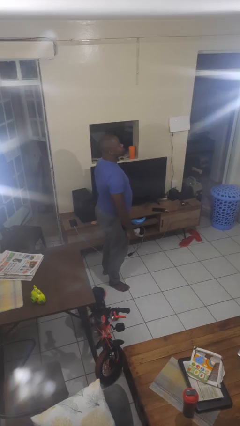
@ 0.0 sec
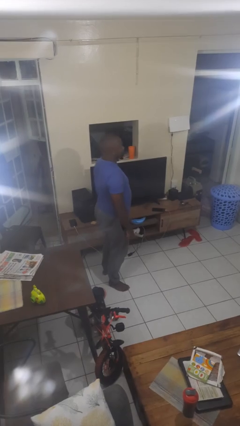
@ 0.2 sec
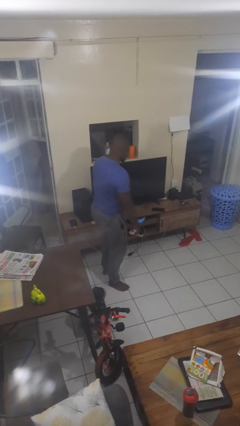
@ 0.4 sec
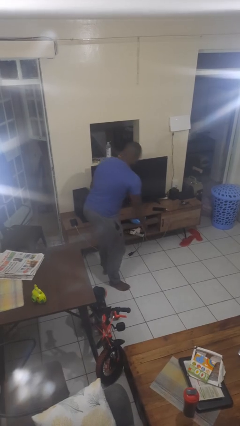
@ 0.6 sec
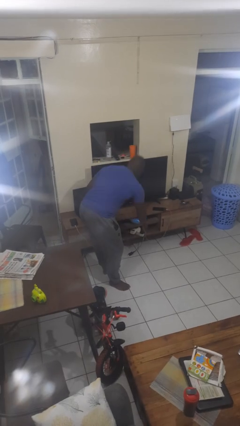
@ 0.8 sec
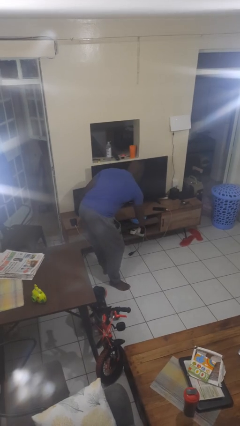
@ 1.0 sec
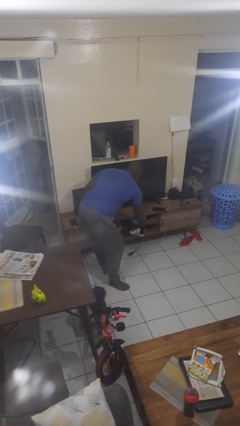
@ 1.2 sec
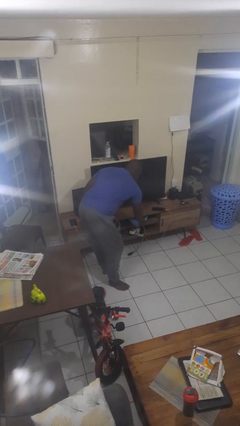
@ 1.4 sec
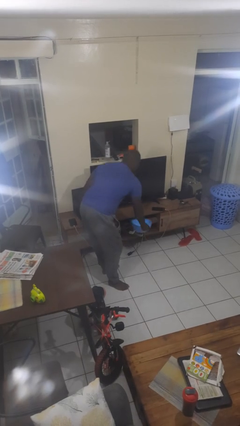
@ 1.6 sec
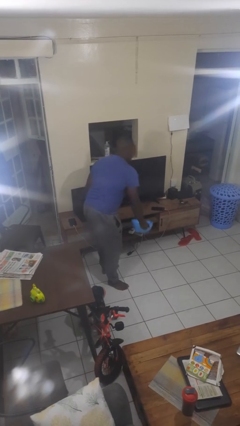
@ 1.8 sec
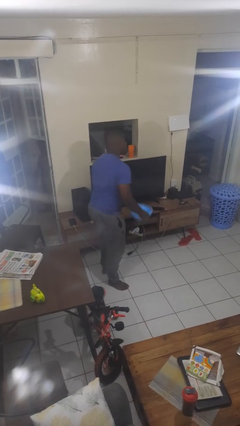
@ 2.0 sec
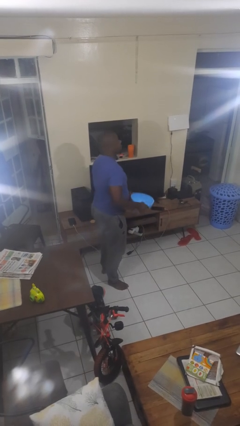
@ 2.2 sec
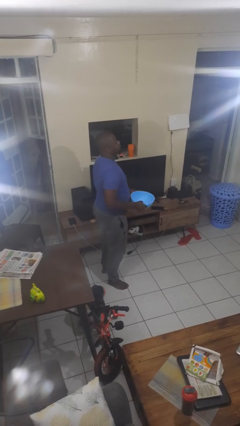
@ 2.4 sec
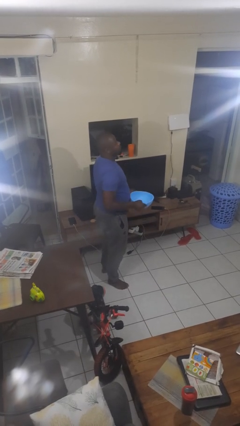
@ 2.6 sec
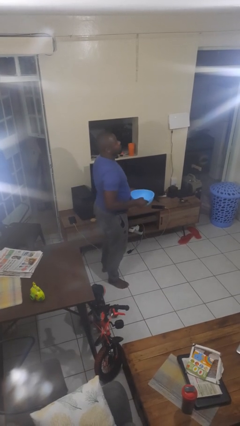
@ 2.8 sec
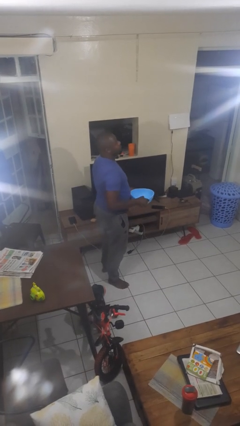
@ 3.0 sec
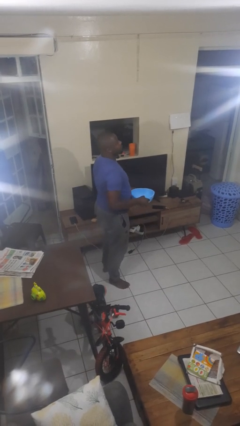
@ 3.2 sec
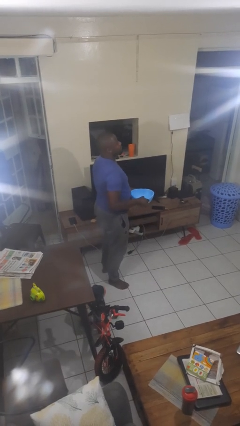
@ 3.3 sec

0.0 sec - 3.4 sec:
person picks up object from cabinet

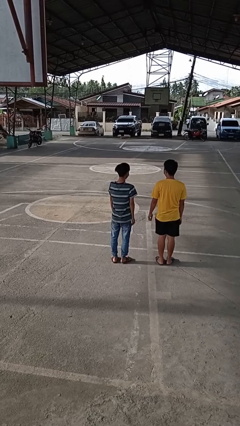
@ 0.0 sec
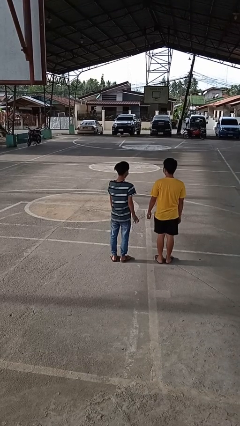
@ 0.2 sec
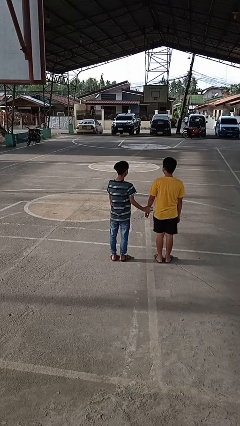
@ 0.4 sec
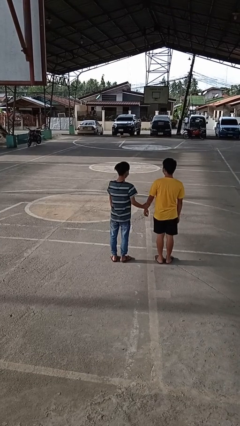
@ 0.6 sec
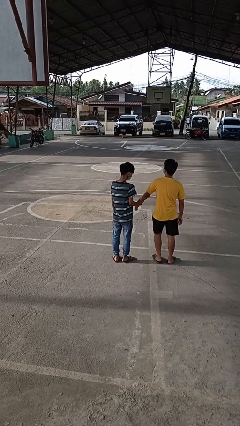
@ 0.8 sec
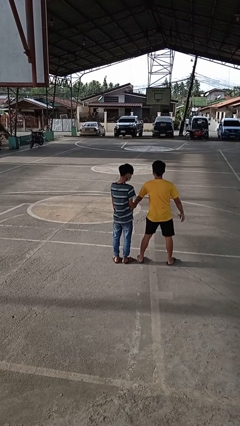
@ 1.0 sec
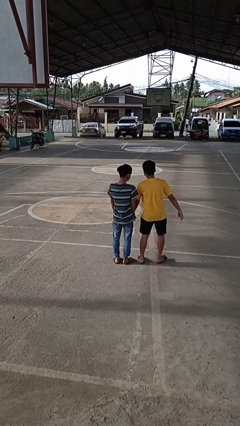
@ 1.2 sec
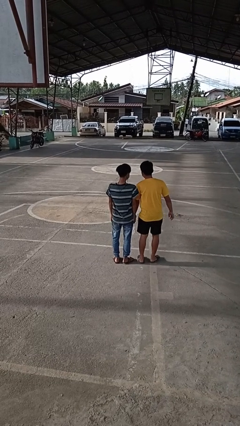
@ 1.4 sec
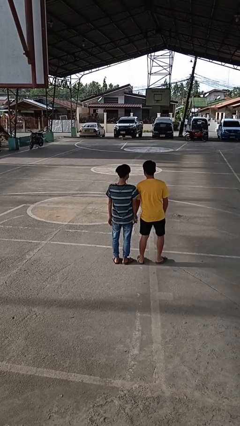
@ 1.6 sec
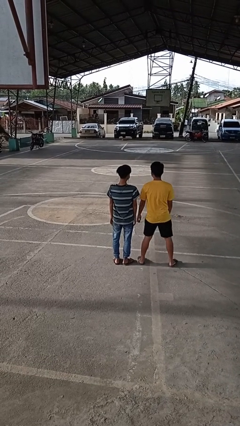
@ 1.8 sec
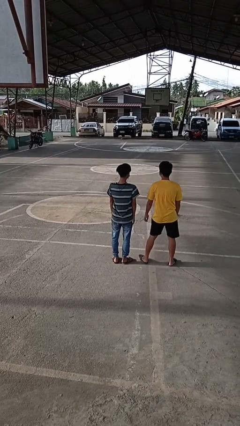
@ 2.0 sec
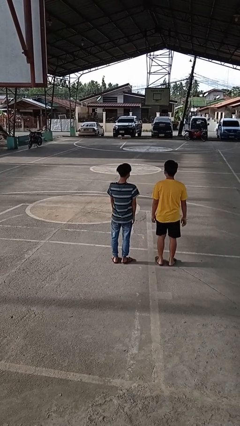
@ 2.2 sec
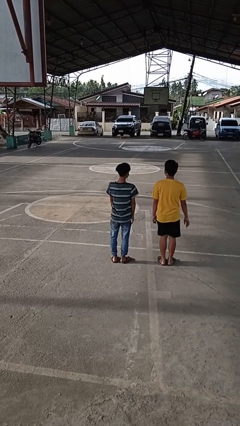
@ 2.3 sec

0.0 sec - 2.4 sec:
person grabs person by forearm

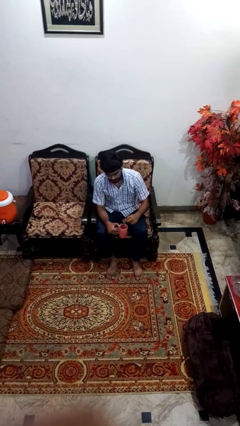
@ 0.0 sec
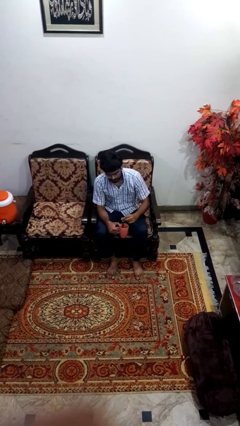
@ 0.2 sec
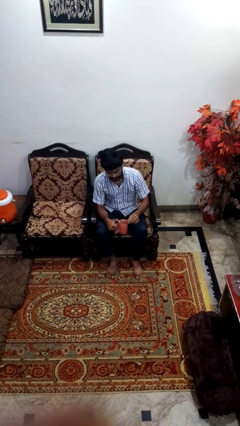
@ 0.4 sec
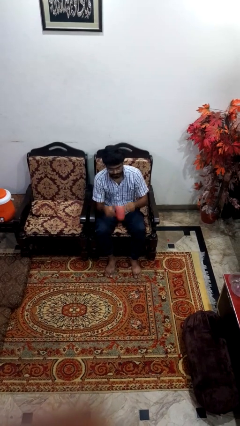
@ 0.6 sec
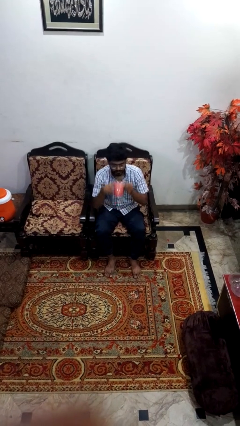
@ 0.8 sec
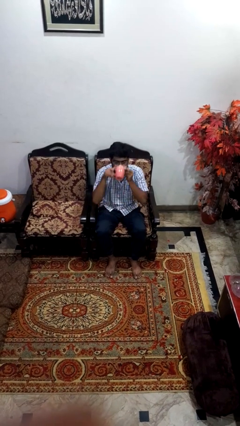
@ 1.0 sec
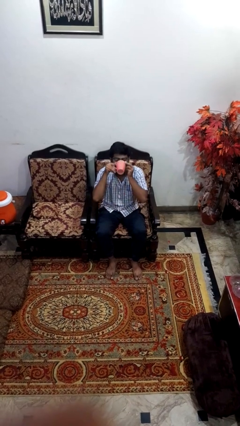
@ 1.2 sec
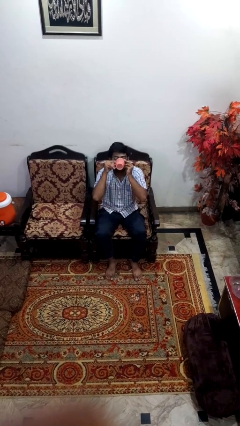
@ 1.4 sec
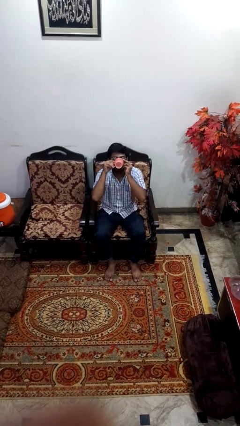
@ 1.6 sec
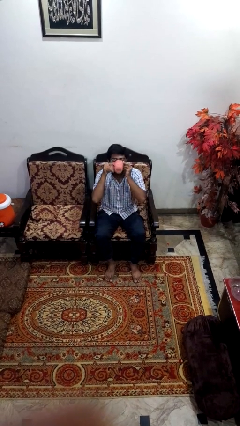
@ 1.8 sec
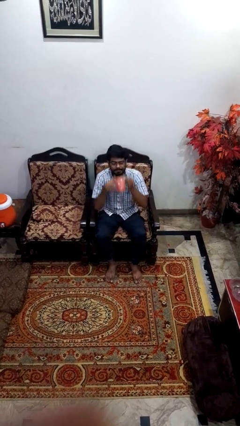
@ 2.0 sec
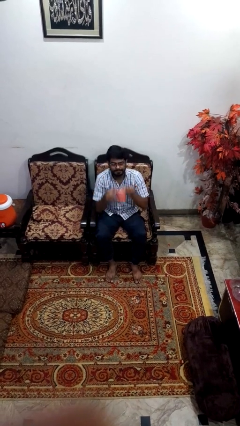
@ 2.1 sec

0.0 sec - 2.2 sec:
person drinks from mug

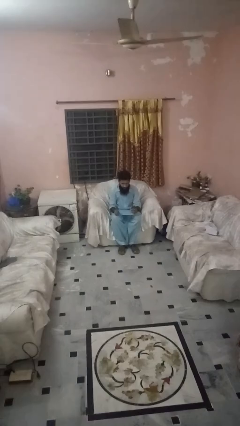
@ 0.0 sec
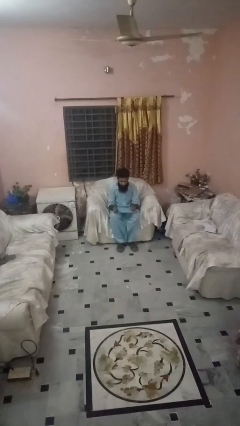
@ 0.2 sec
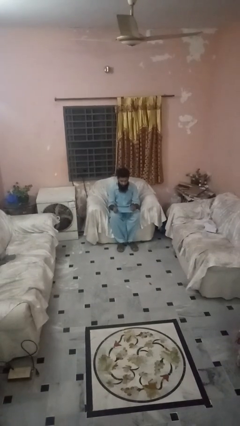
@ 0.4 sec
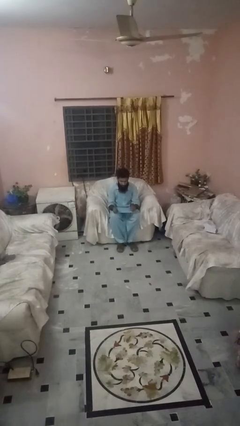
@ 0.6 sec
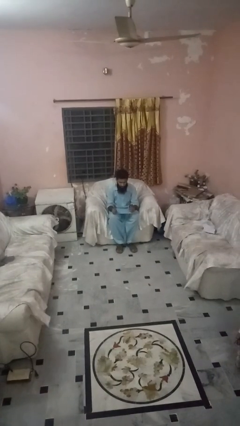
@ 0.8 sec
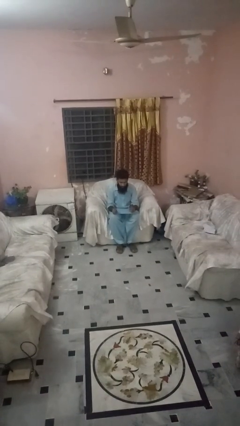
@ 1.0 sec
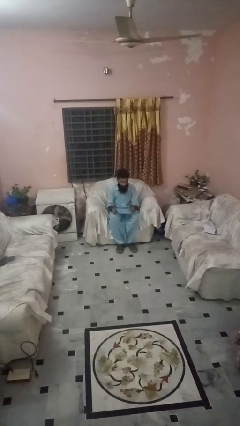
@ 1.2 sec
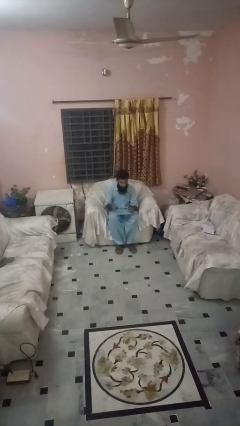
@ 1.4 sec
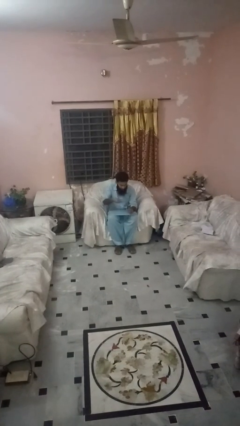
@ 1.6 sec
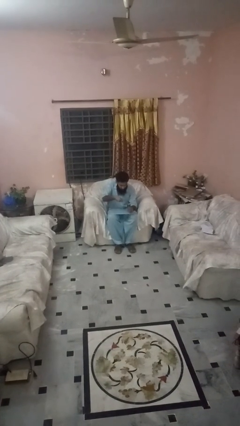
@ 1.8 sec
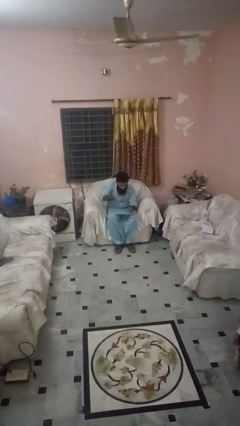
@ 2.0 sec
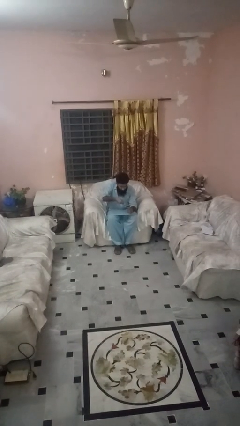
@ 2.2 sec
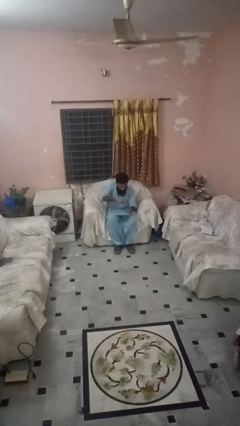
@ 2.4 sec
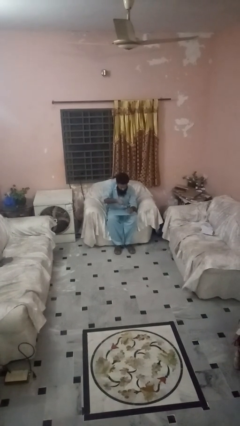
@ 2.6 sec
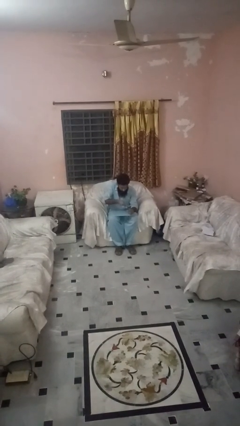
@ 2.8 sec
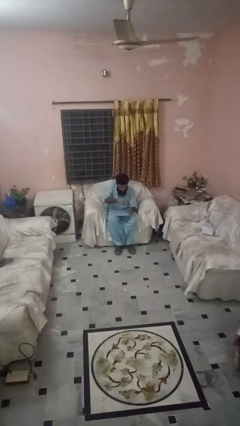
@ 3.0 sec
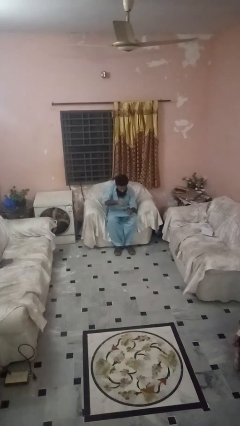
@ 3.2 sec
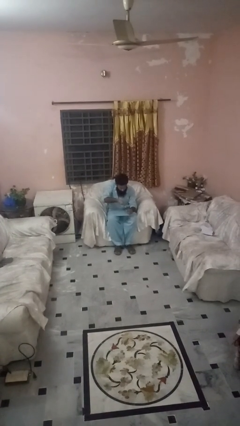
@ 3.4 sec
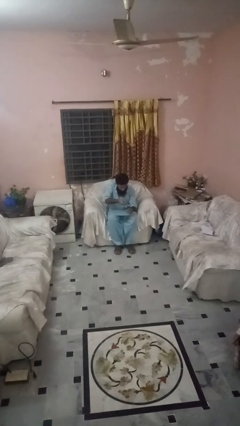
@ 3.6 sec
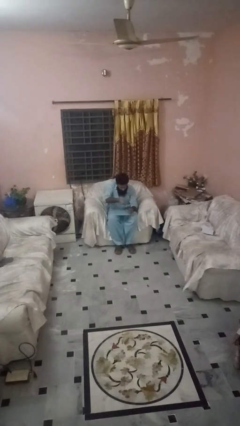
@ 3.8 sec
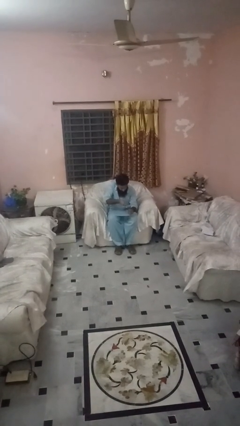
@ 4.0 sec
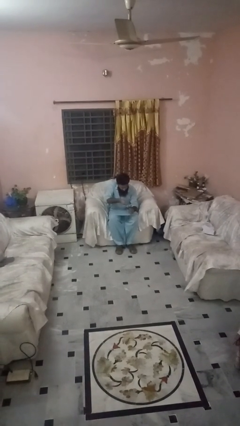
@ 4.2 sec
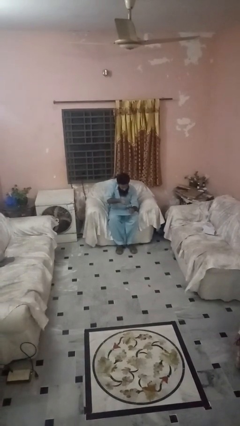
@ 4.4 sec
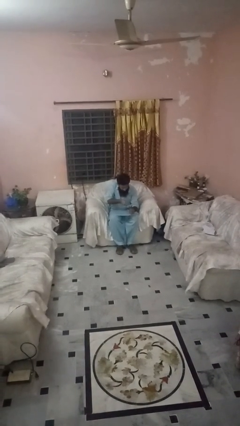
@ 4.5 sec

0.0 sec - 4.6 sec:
person opens can with can opener

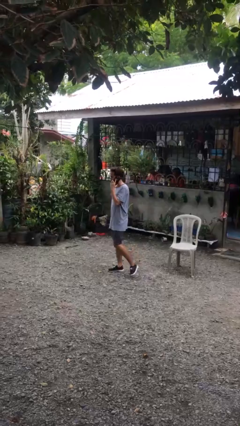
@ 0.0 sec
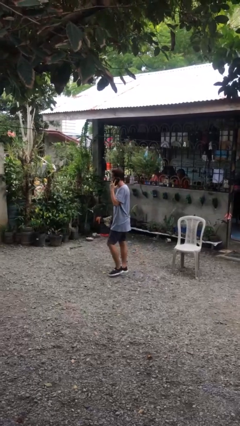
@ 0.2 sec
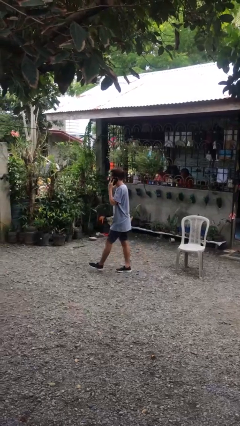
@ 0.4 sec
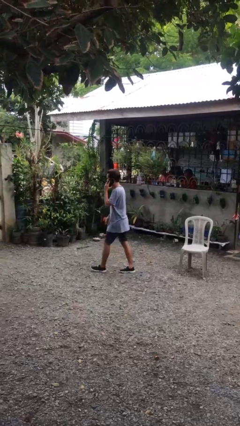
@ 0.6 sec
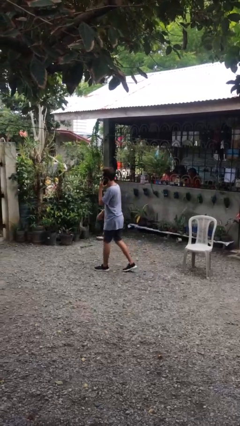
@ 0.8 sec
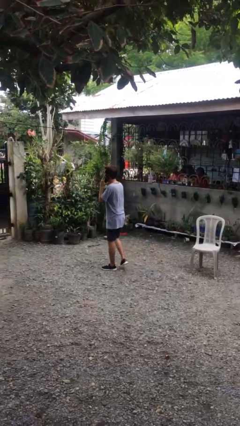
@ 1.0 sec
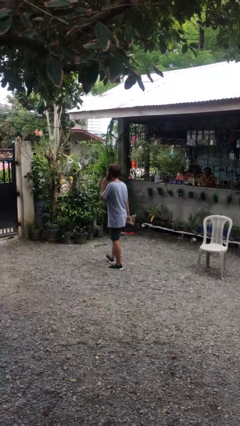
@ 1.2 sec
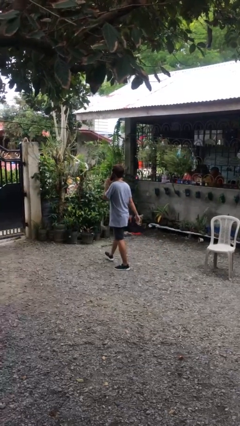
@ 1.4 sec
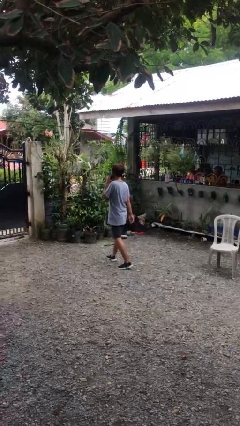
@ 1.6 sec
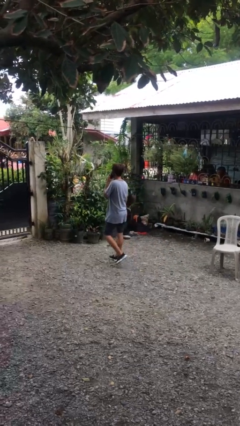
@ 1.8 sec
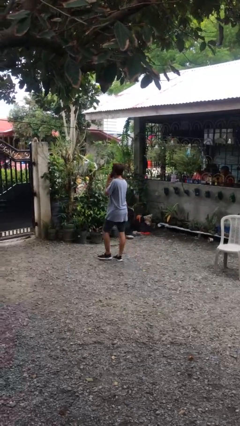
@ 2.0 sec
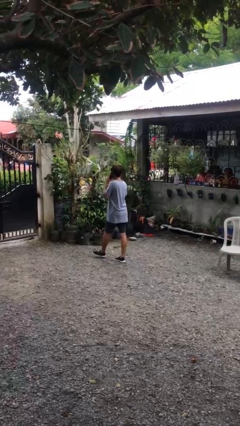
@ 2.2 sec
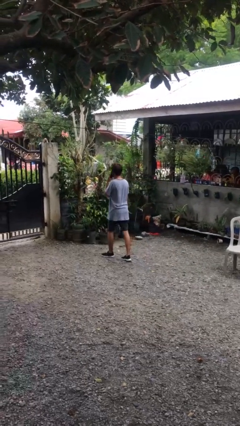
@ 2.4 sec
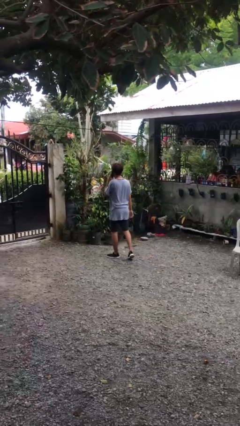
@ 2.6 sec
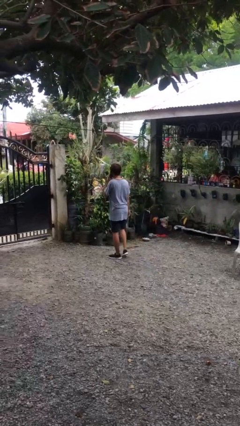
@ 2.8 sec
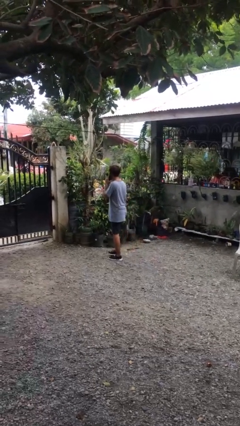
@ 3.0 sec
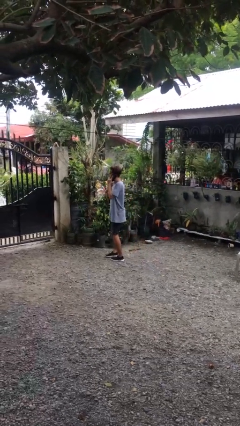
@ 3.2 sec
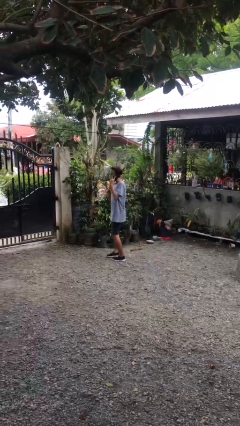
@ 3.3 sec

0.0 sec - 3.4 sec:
person talks on phone

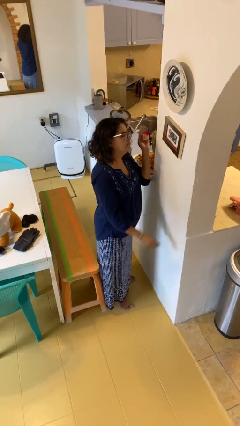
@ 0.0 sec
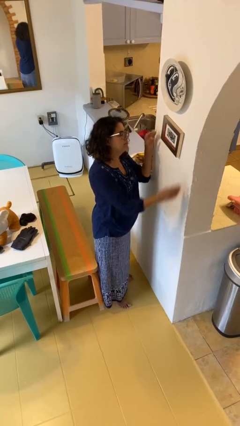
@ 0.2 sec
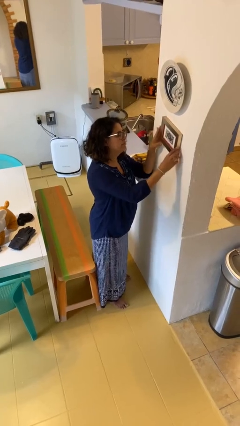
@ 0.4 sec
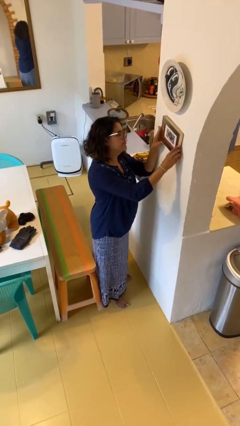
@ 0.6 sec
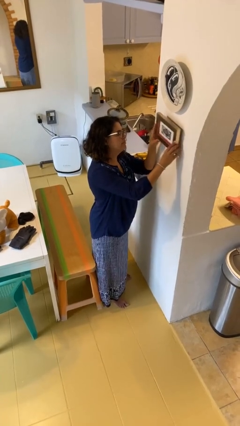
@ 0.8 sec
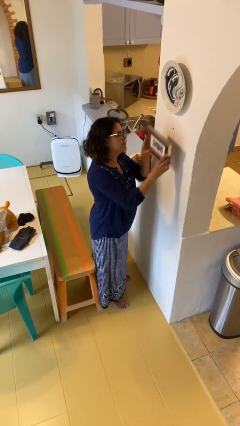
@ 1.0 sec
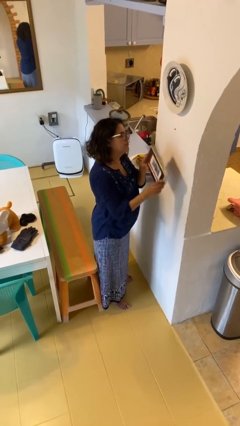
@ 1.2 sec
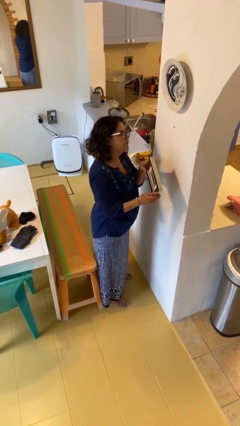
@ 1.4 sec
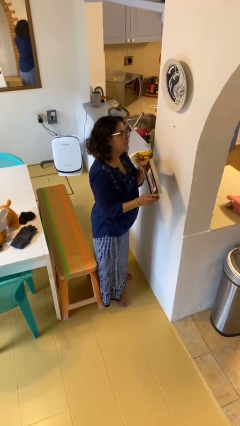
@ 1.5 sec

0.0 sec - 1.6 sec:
person takes down picture frame
